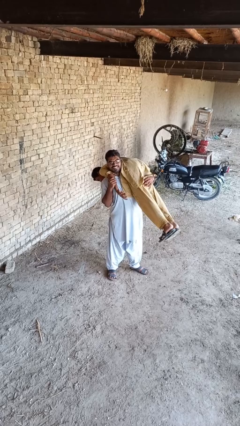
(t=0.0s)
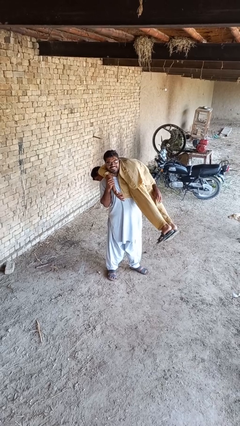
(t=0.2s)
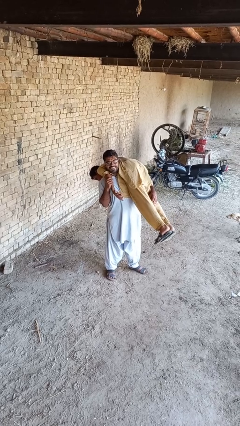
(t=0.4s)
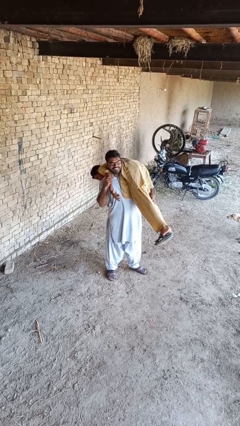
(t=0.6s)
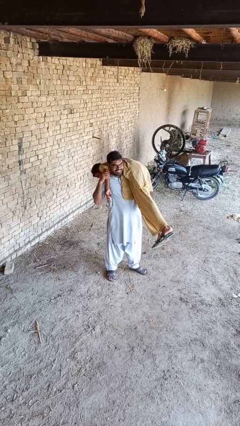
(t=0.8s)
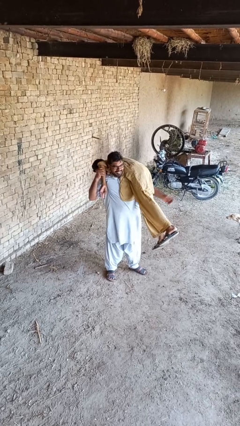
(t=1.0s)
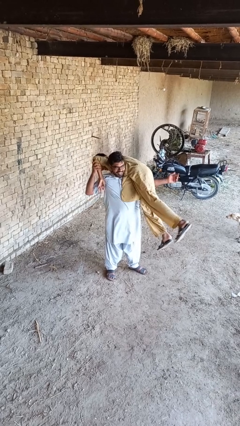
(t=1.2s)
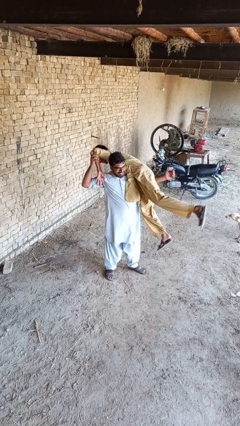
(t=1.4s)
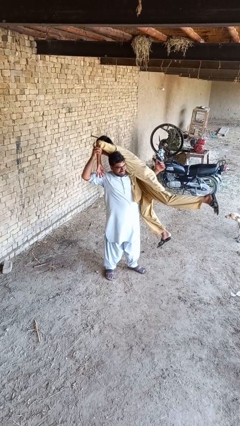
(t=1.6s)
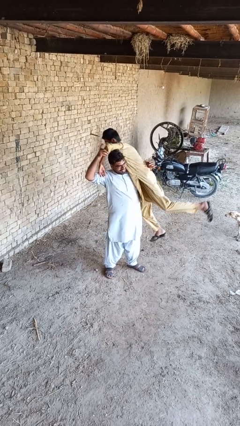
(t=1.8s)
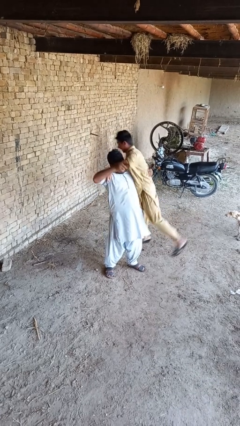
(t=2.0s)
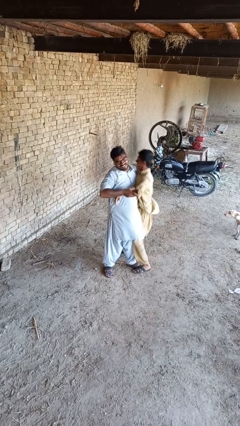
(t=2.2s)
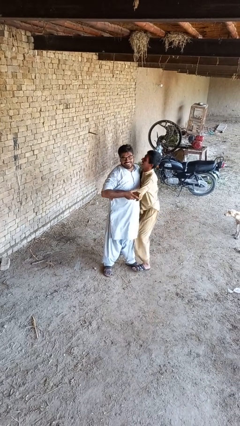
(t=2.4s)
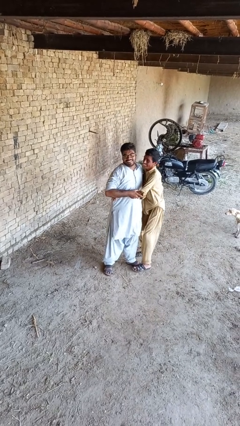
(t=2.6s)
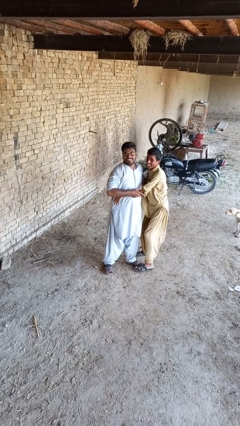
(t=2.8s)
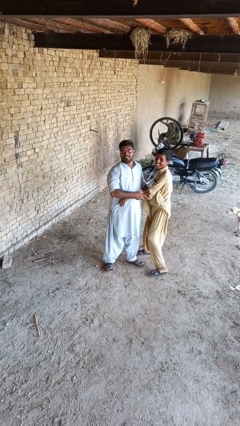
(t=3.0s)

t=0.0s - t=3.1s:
person puts down person

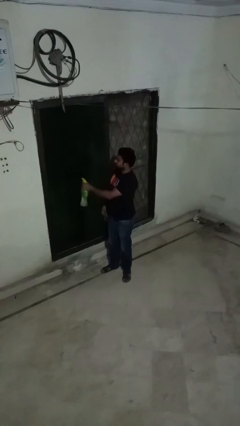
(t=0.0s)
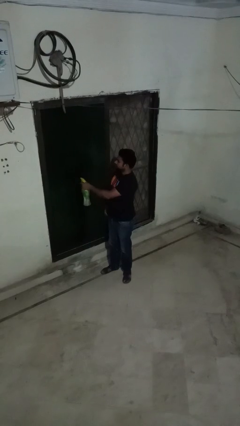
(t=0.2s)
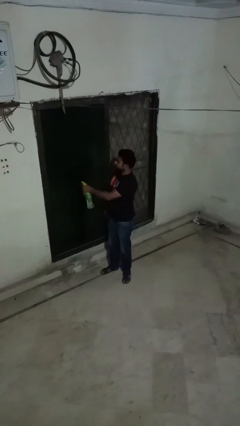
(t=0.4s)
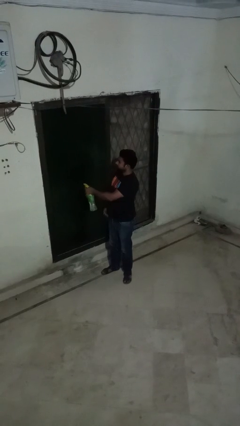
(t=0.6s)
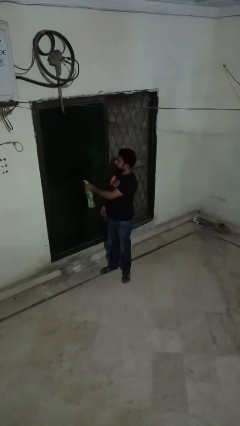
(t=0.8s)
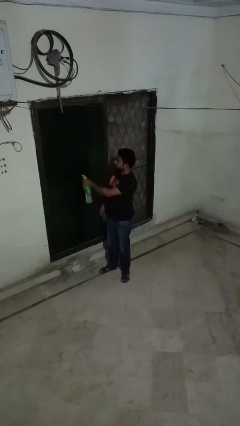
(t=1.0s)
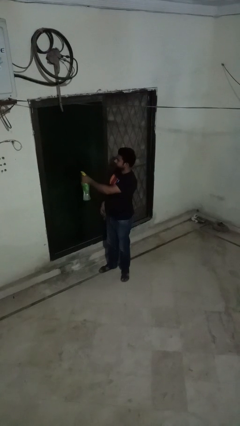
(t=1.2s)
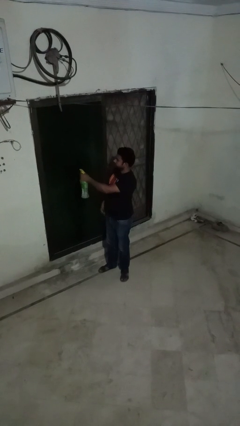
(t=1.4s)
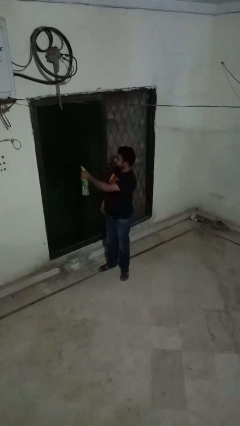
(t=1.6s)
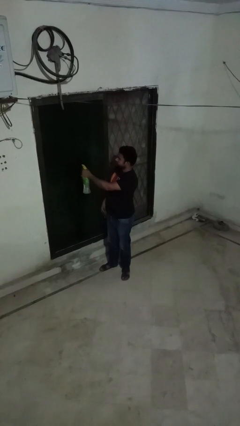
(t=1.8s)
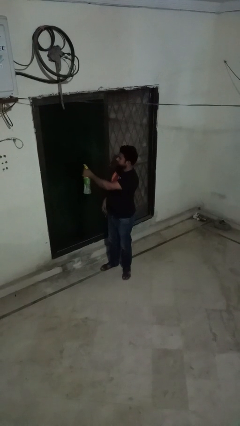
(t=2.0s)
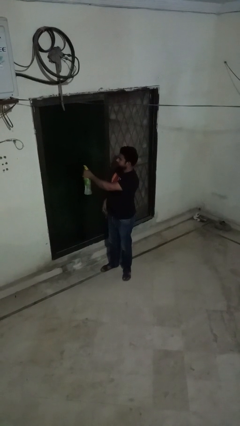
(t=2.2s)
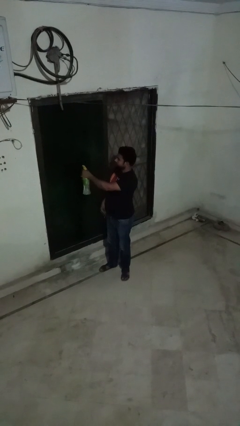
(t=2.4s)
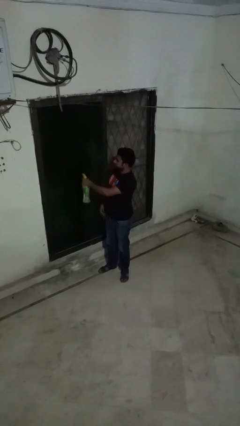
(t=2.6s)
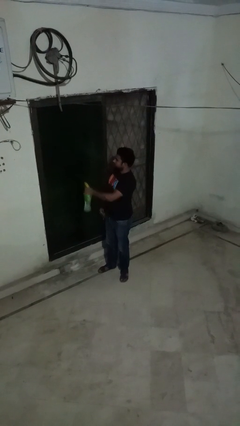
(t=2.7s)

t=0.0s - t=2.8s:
person sprays from bottle

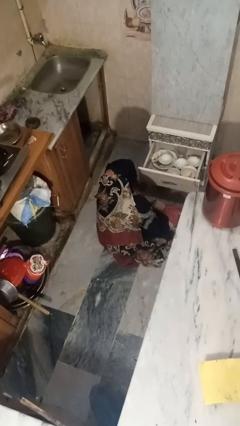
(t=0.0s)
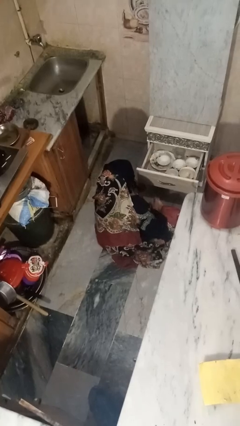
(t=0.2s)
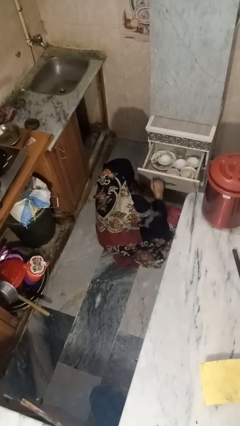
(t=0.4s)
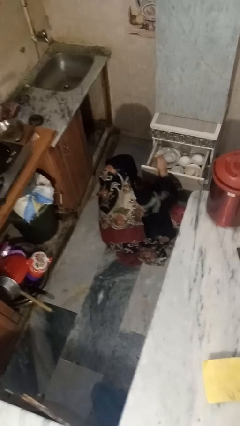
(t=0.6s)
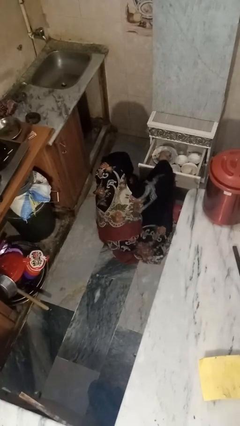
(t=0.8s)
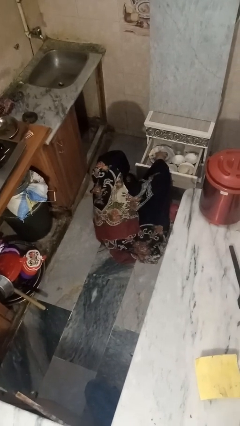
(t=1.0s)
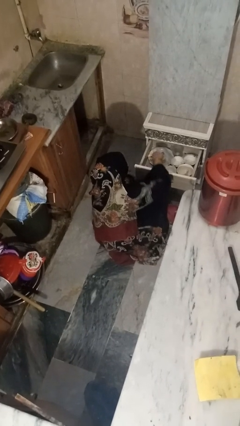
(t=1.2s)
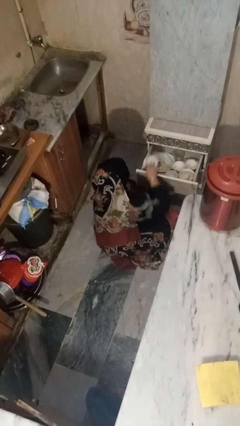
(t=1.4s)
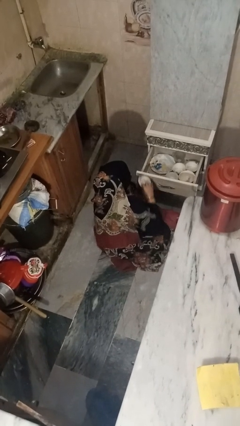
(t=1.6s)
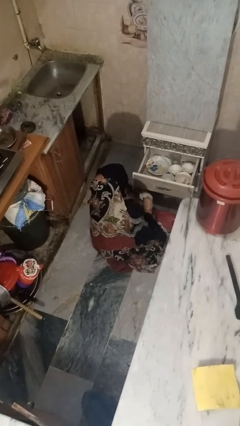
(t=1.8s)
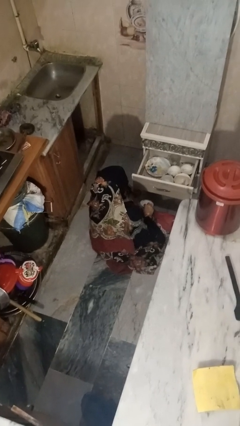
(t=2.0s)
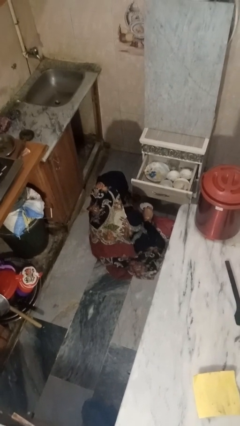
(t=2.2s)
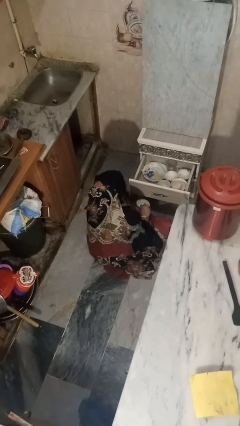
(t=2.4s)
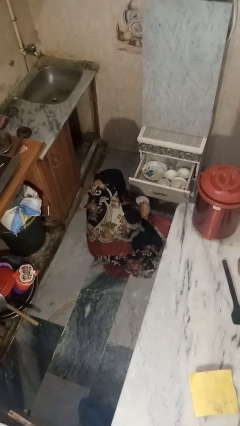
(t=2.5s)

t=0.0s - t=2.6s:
person takes object from kitchen drawer

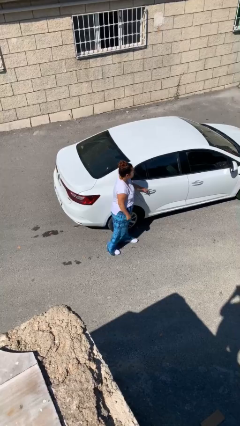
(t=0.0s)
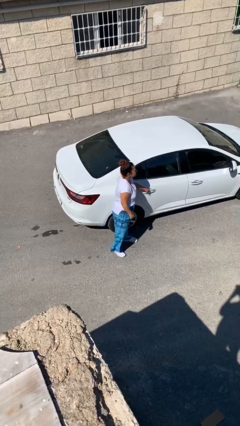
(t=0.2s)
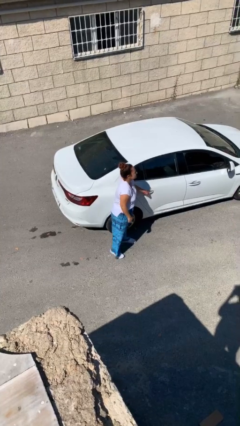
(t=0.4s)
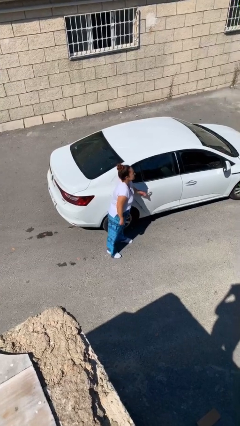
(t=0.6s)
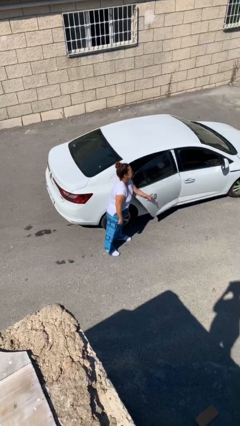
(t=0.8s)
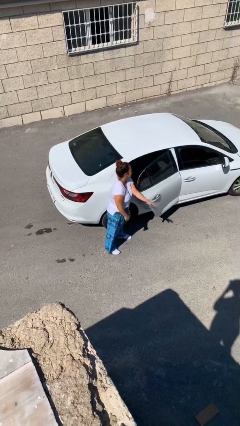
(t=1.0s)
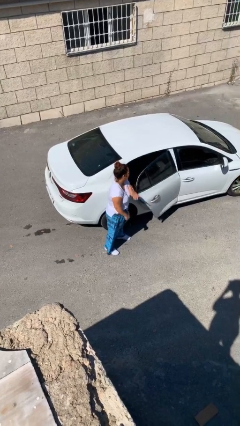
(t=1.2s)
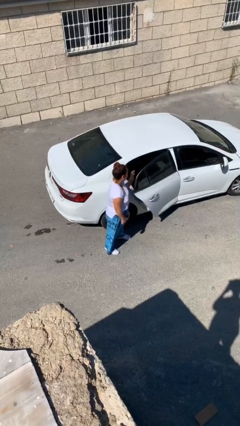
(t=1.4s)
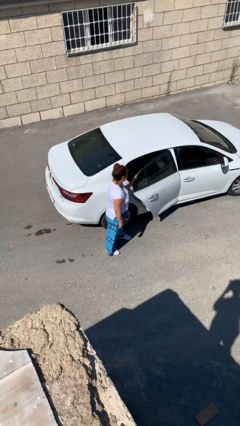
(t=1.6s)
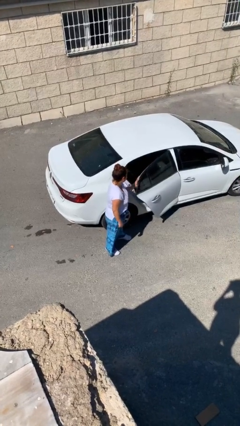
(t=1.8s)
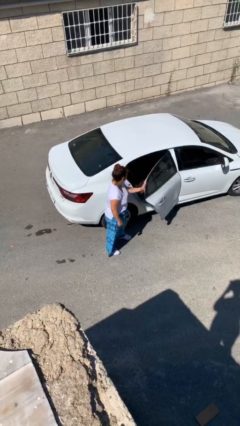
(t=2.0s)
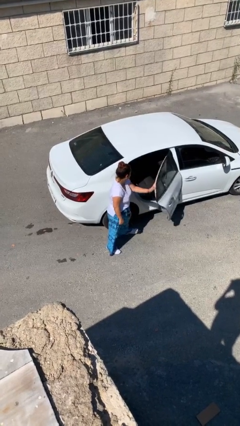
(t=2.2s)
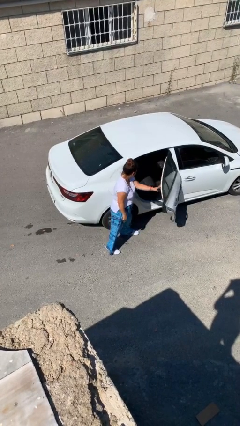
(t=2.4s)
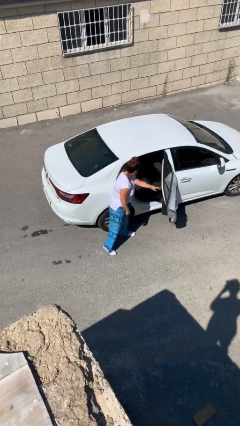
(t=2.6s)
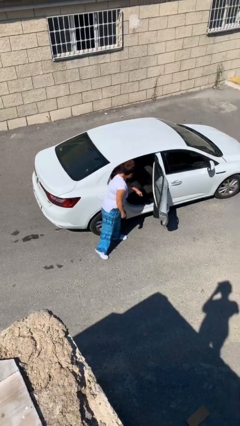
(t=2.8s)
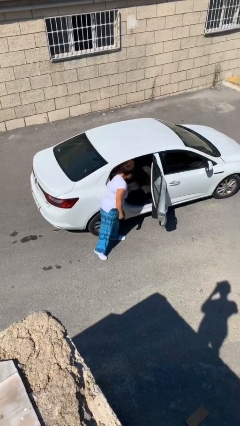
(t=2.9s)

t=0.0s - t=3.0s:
person opens car door

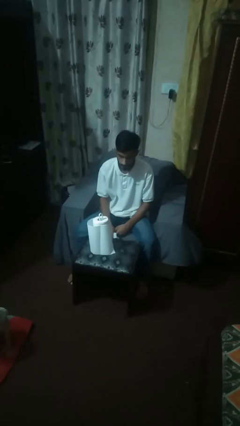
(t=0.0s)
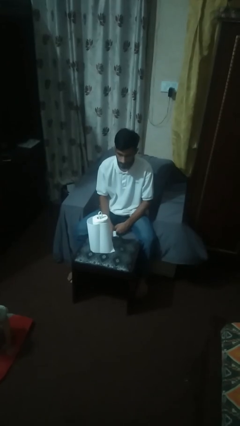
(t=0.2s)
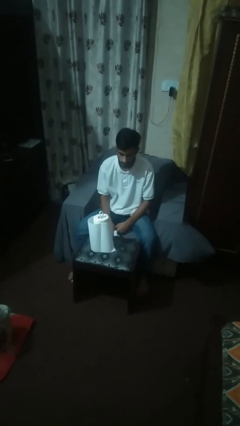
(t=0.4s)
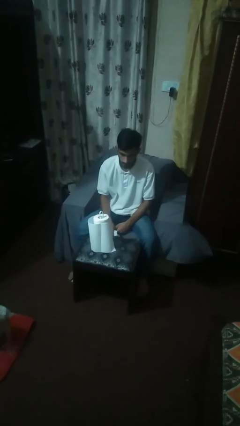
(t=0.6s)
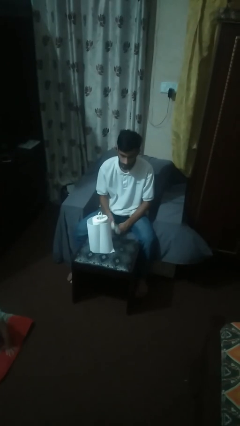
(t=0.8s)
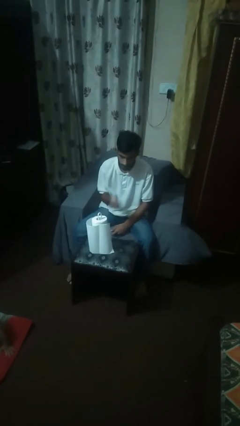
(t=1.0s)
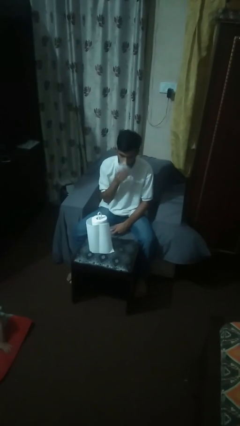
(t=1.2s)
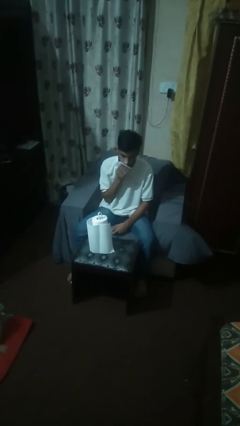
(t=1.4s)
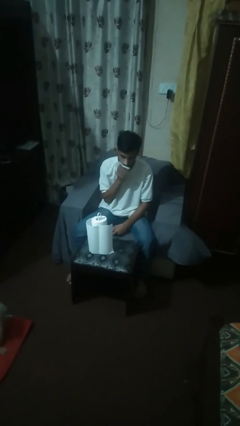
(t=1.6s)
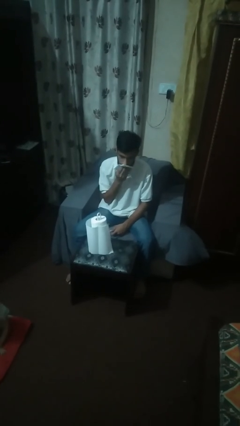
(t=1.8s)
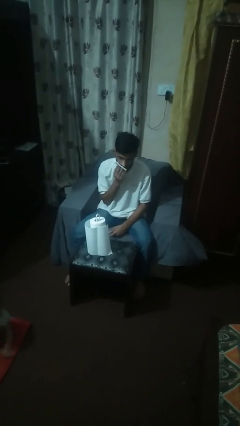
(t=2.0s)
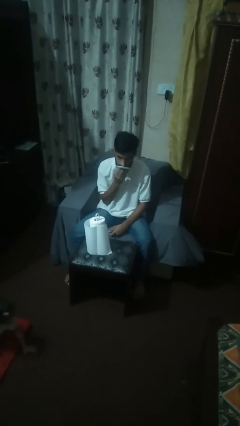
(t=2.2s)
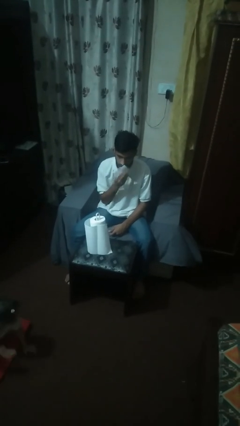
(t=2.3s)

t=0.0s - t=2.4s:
person wipes mouth with napkin

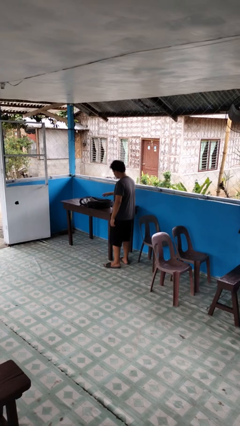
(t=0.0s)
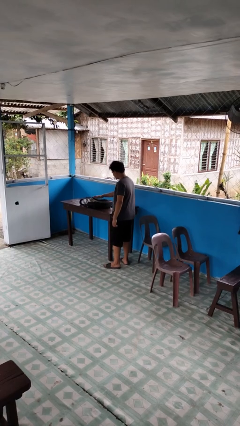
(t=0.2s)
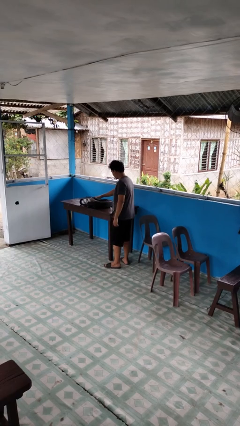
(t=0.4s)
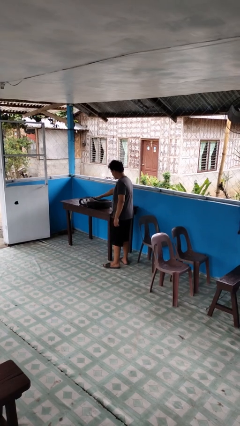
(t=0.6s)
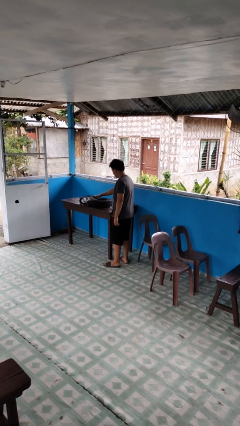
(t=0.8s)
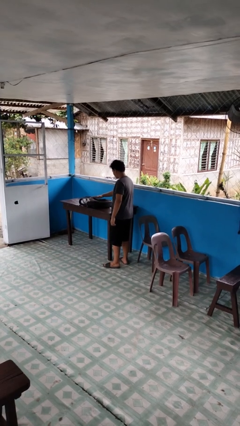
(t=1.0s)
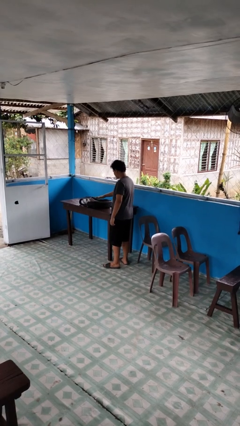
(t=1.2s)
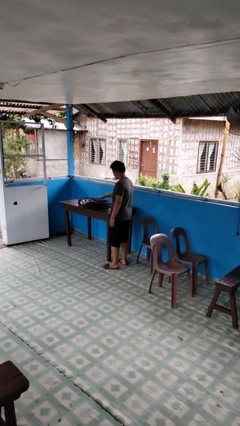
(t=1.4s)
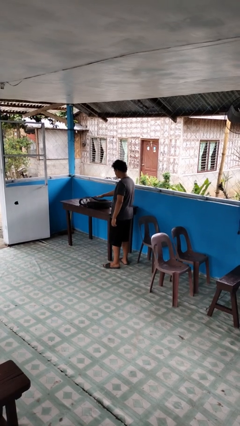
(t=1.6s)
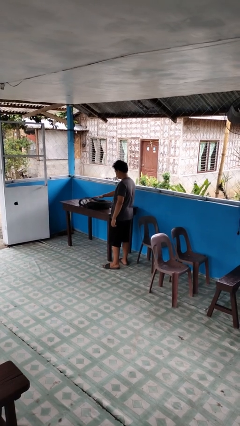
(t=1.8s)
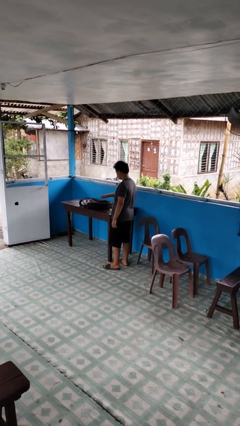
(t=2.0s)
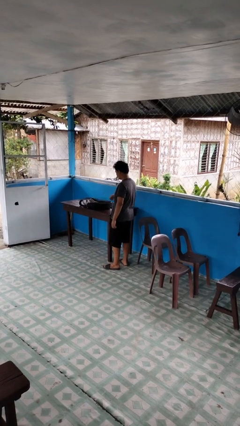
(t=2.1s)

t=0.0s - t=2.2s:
person waves hand over object

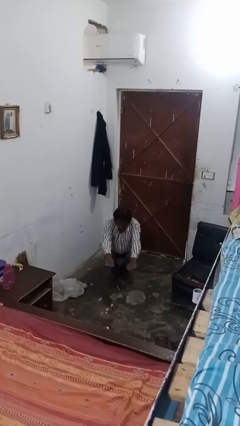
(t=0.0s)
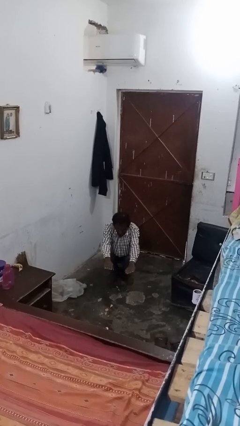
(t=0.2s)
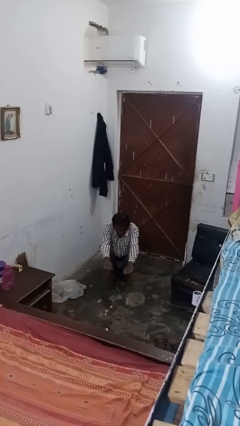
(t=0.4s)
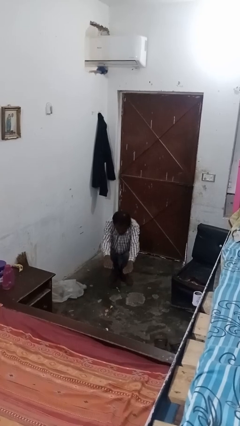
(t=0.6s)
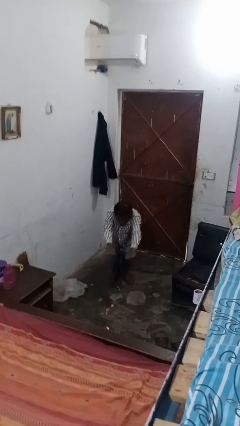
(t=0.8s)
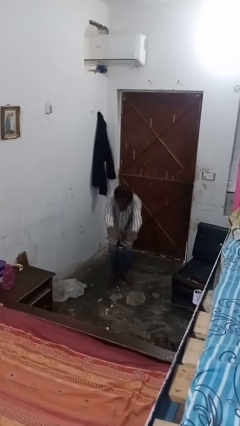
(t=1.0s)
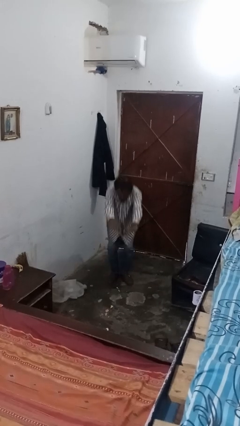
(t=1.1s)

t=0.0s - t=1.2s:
person squats

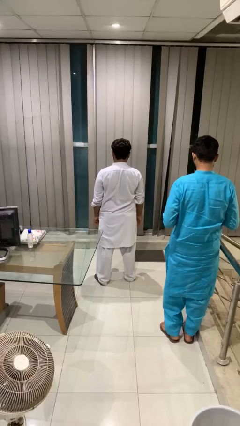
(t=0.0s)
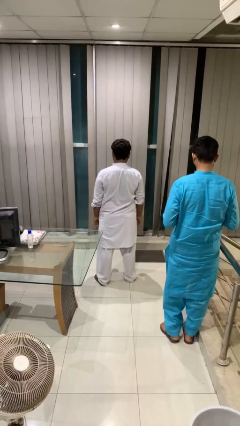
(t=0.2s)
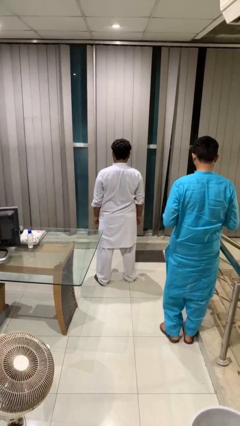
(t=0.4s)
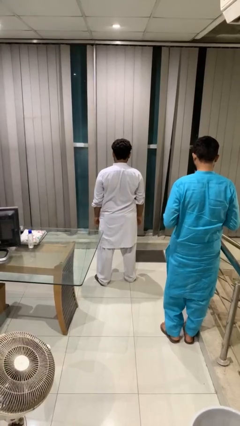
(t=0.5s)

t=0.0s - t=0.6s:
person looks over shoulder
